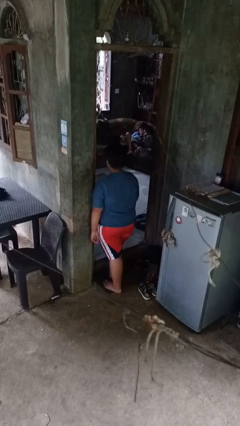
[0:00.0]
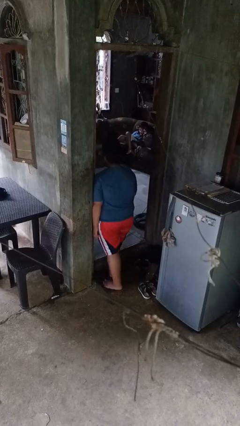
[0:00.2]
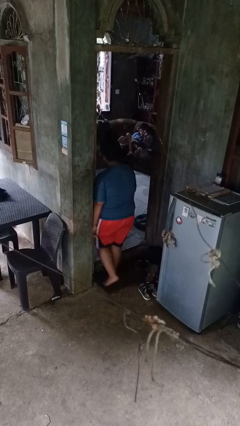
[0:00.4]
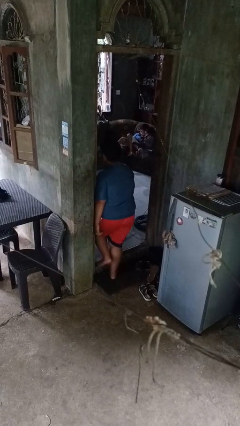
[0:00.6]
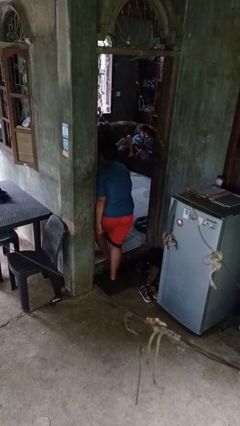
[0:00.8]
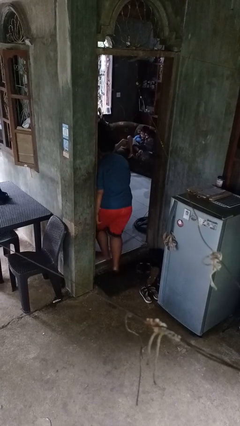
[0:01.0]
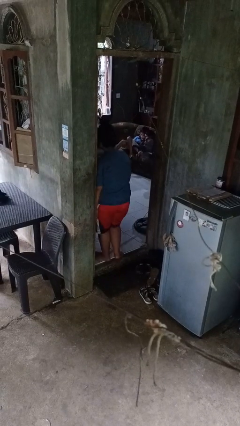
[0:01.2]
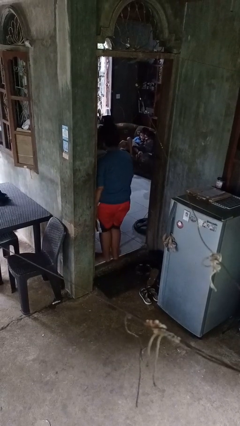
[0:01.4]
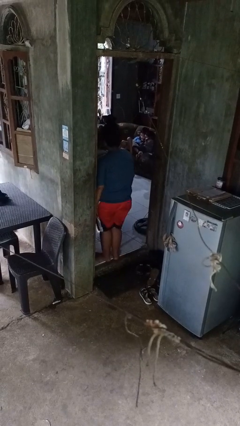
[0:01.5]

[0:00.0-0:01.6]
person bumps into wall

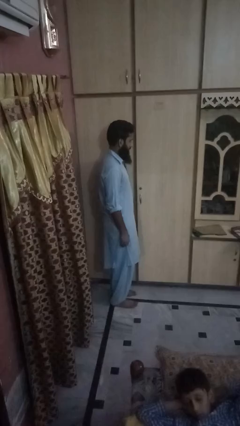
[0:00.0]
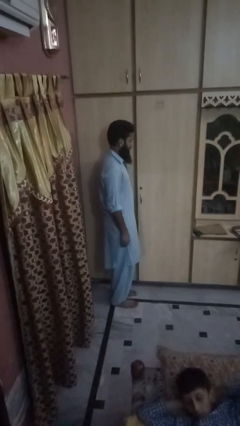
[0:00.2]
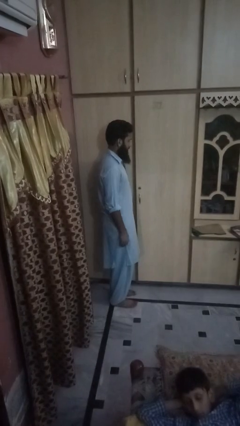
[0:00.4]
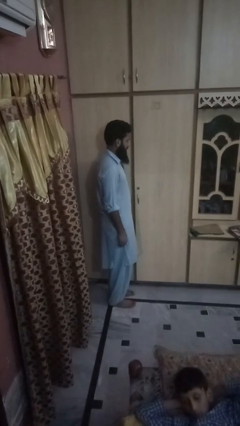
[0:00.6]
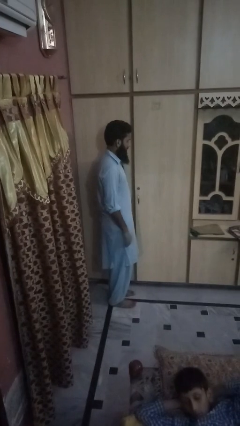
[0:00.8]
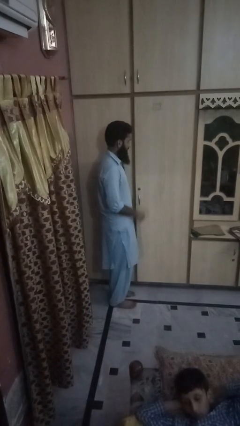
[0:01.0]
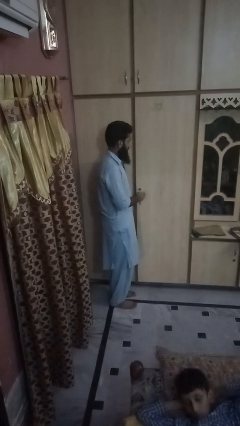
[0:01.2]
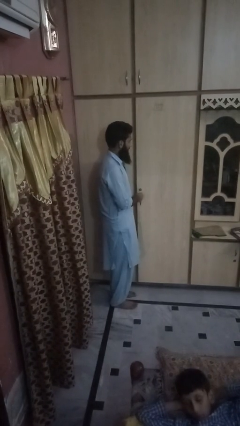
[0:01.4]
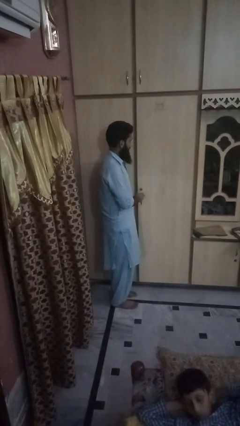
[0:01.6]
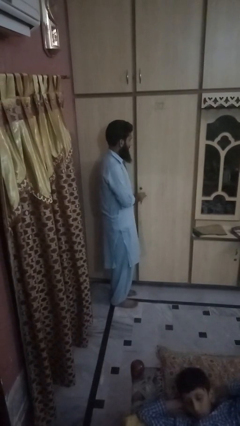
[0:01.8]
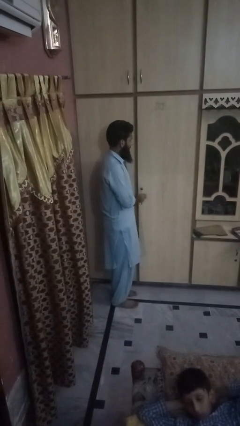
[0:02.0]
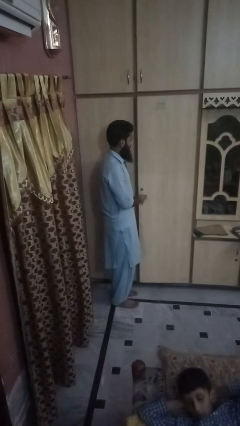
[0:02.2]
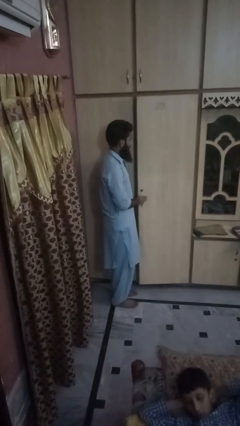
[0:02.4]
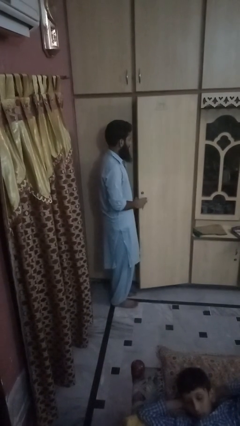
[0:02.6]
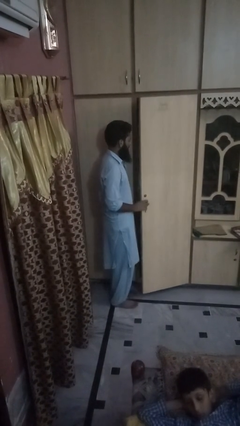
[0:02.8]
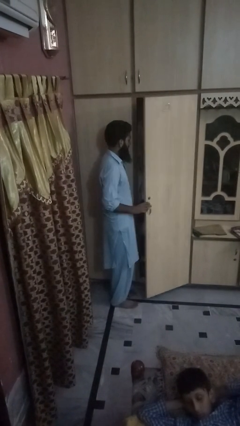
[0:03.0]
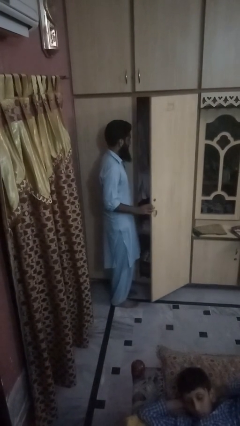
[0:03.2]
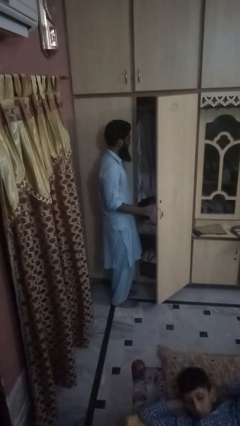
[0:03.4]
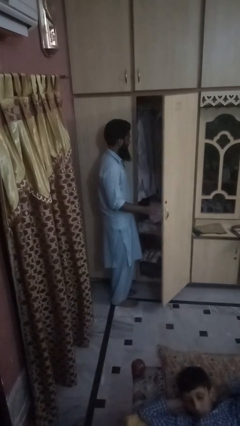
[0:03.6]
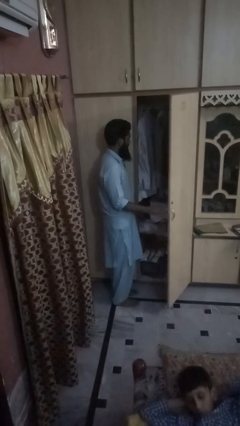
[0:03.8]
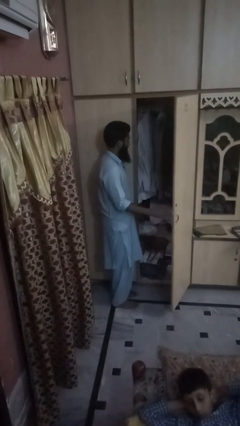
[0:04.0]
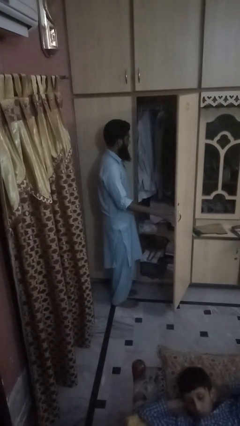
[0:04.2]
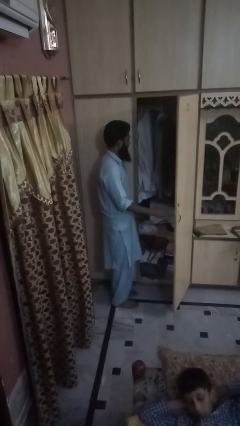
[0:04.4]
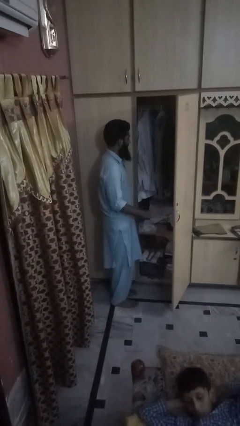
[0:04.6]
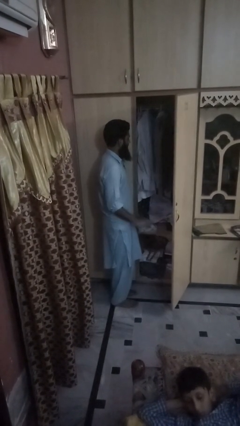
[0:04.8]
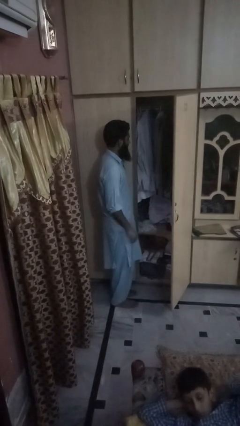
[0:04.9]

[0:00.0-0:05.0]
person opens dresser drawer

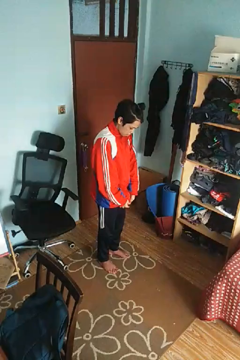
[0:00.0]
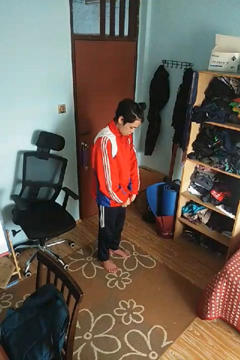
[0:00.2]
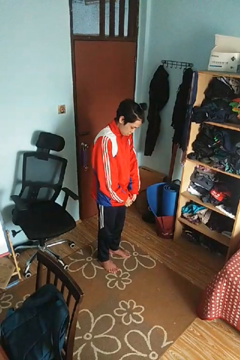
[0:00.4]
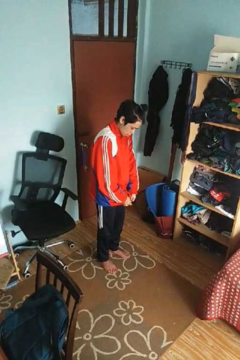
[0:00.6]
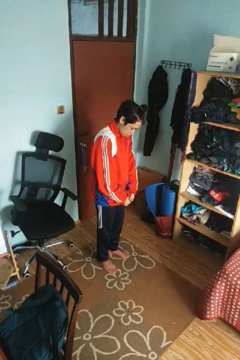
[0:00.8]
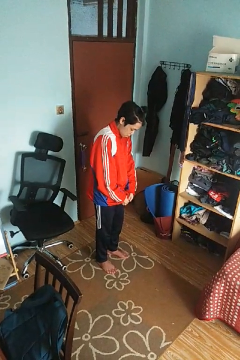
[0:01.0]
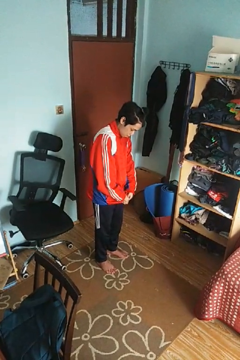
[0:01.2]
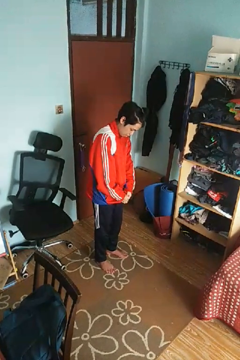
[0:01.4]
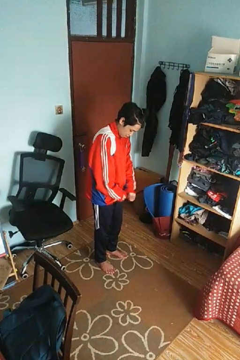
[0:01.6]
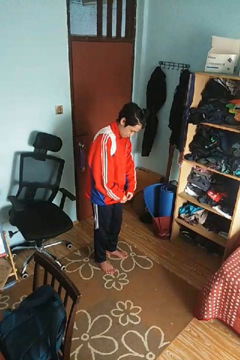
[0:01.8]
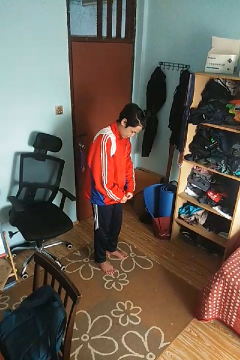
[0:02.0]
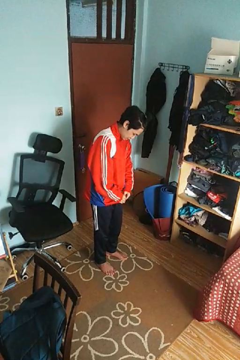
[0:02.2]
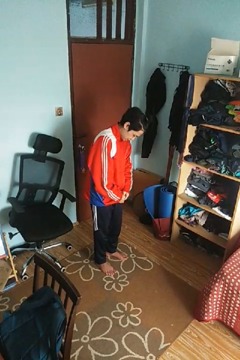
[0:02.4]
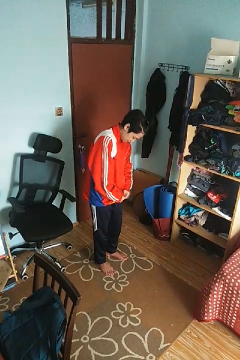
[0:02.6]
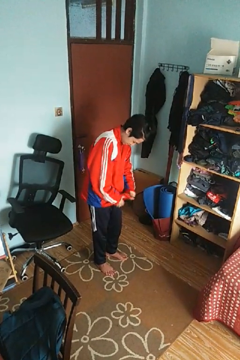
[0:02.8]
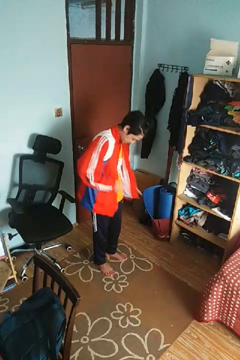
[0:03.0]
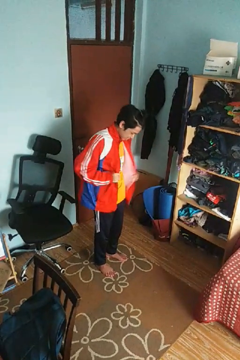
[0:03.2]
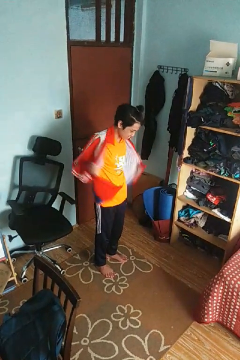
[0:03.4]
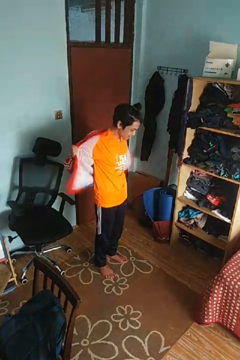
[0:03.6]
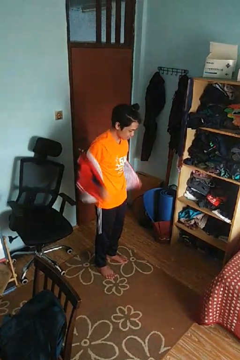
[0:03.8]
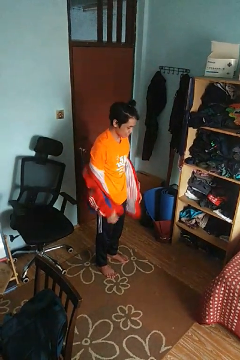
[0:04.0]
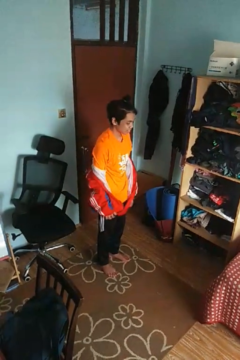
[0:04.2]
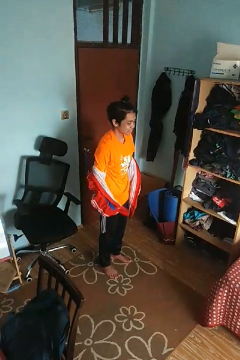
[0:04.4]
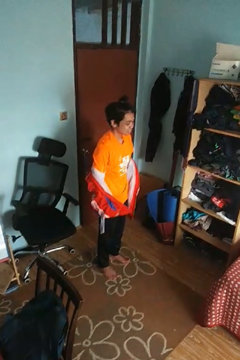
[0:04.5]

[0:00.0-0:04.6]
person takes off jacket

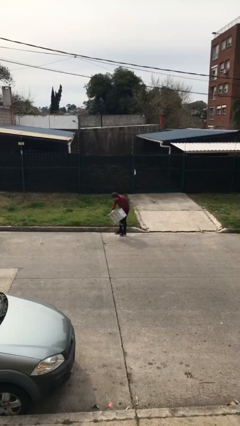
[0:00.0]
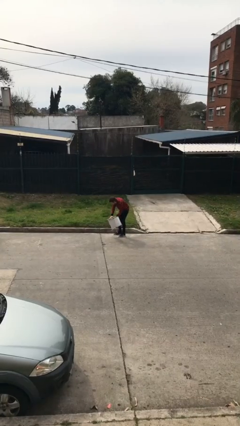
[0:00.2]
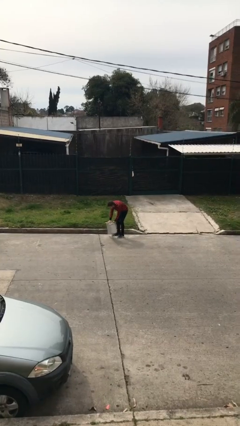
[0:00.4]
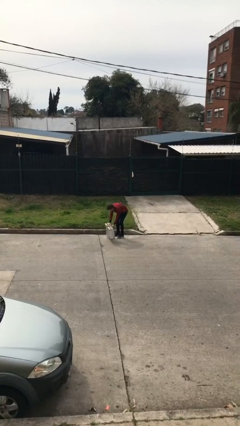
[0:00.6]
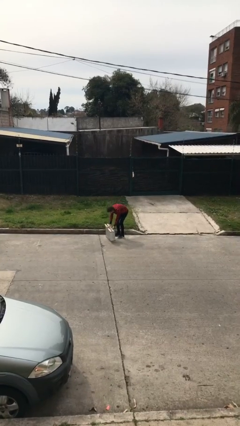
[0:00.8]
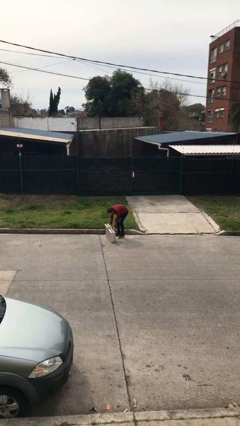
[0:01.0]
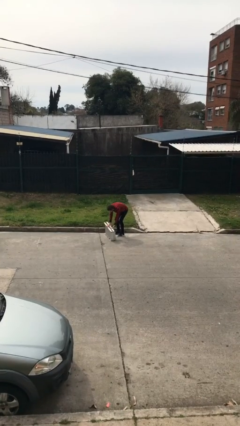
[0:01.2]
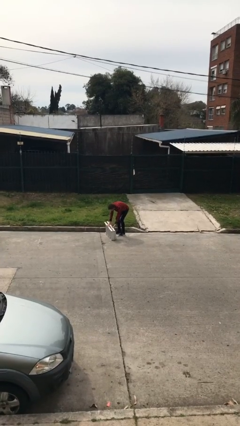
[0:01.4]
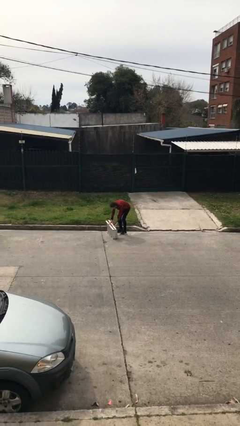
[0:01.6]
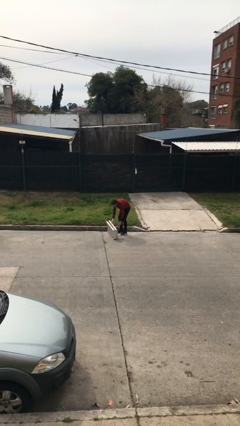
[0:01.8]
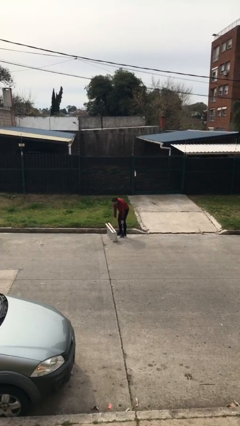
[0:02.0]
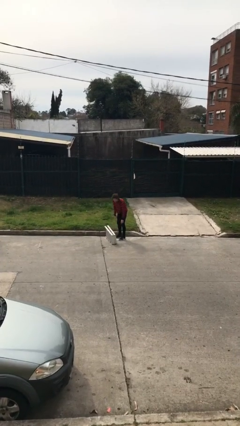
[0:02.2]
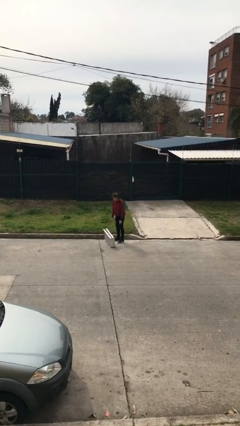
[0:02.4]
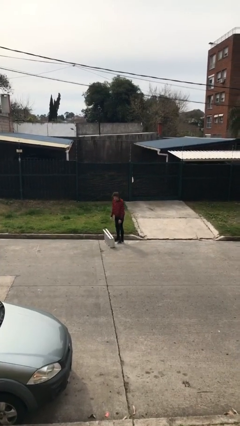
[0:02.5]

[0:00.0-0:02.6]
person puts down object on floor

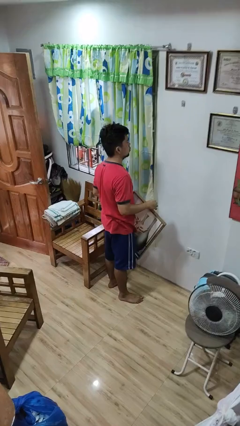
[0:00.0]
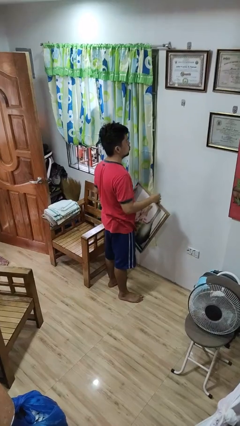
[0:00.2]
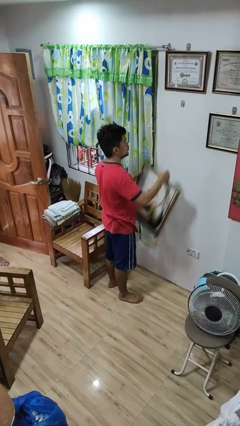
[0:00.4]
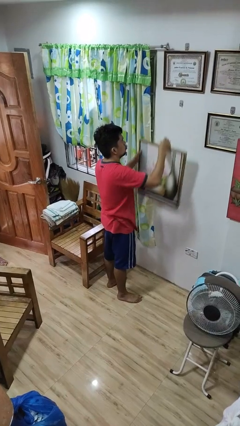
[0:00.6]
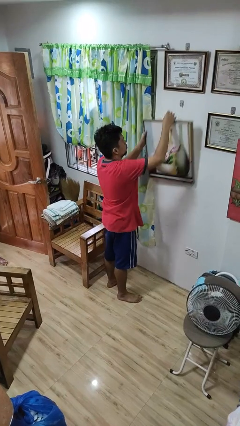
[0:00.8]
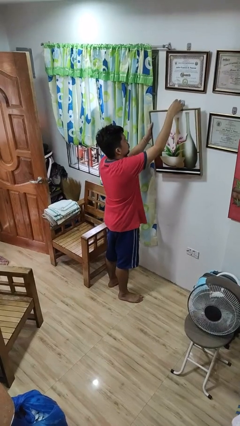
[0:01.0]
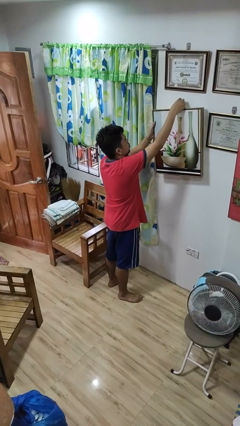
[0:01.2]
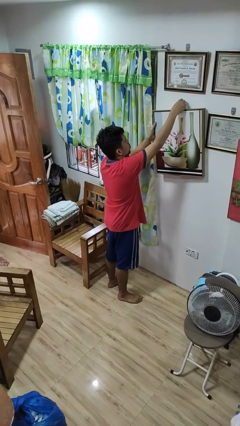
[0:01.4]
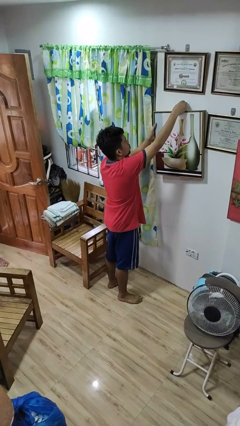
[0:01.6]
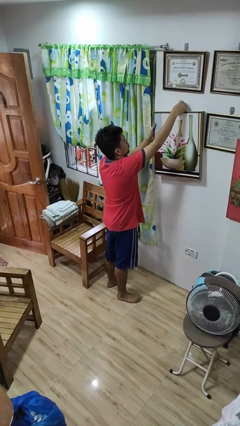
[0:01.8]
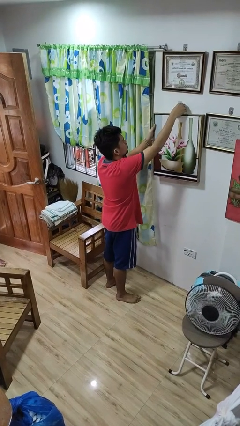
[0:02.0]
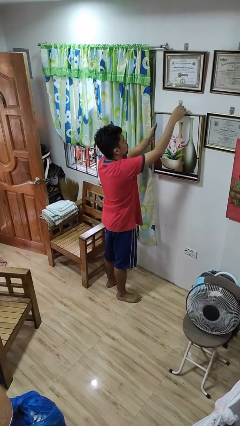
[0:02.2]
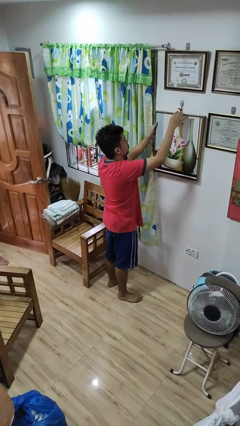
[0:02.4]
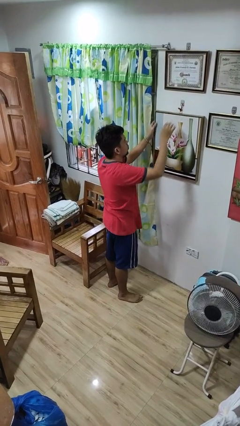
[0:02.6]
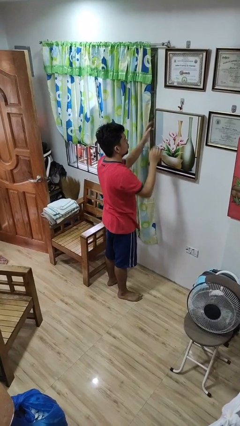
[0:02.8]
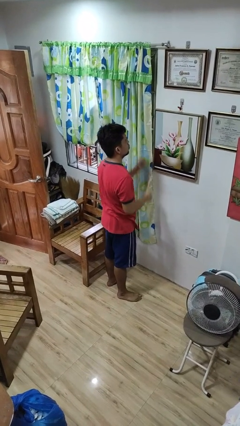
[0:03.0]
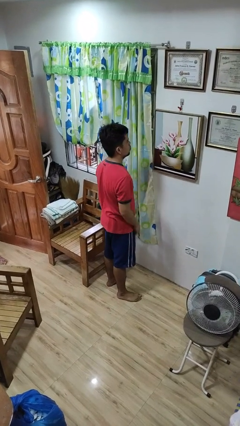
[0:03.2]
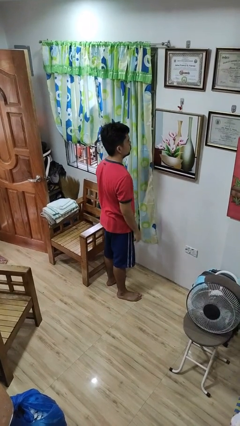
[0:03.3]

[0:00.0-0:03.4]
person puts up picture frame

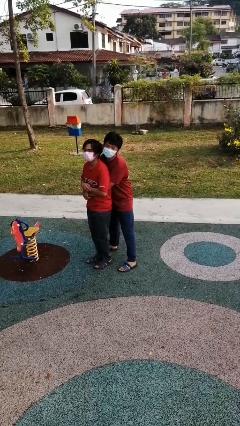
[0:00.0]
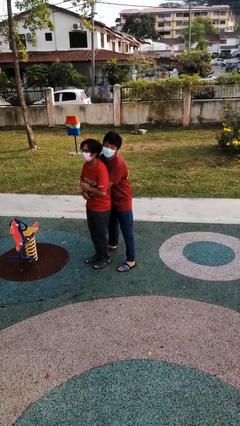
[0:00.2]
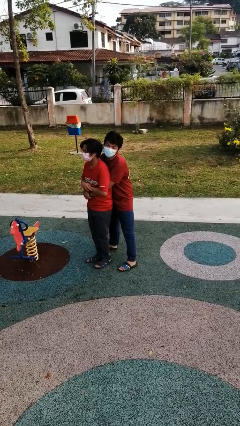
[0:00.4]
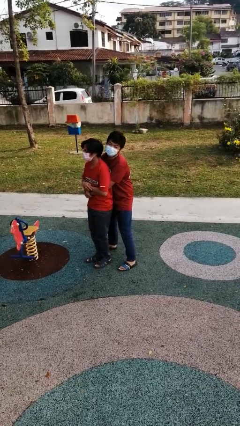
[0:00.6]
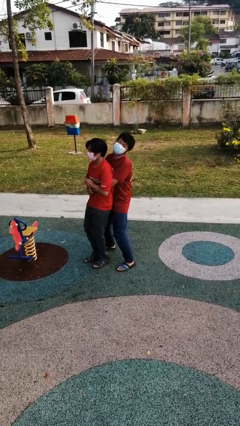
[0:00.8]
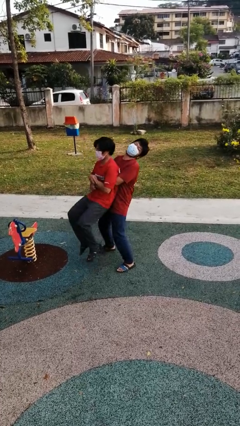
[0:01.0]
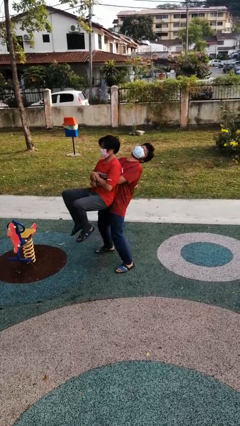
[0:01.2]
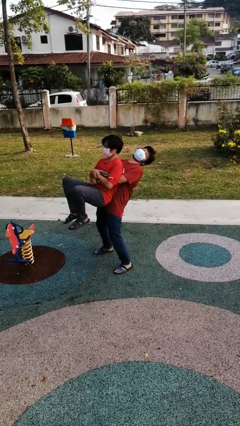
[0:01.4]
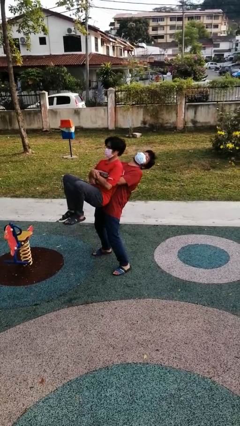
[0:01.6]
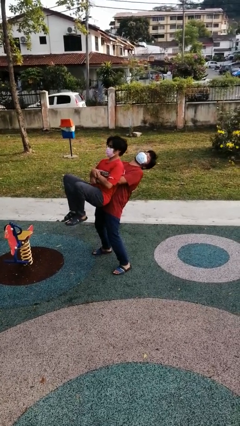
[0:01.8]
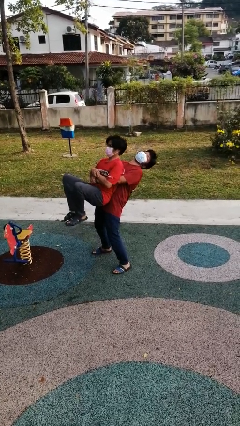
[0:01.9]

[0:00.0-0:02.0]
person picks up person
